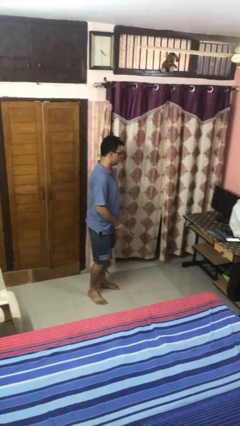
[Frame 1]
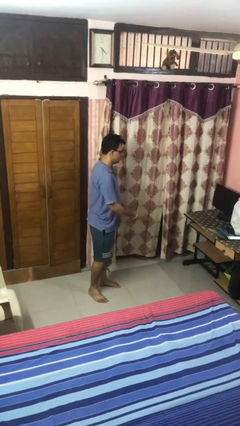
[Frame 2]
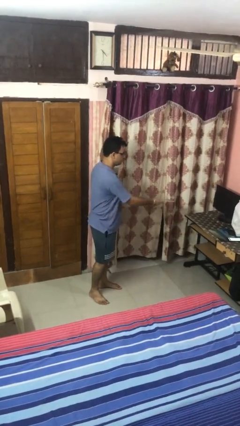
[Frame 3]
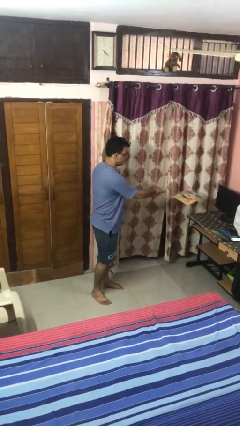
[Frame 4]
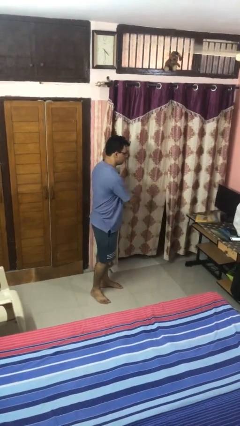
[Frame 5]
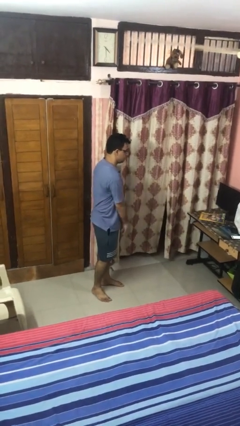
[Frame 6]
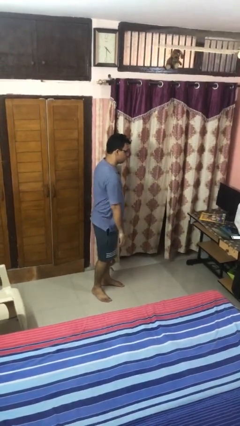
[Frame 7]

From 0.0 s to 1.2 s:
person throws object on table

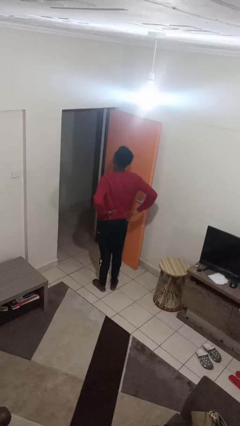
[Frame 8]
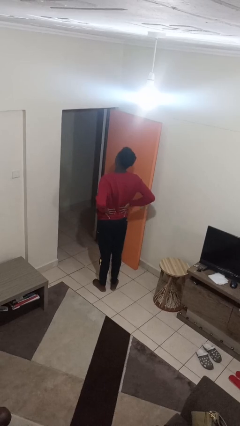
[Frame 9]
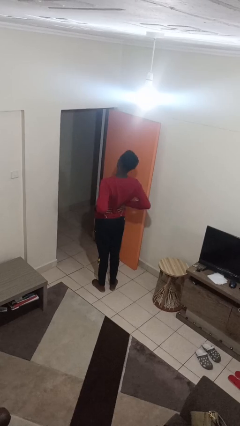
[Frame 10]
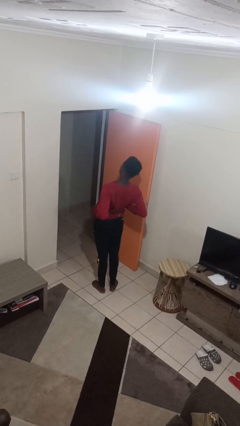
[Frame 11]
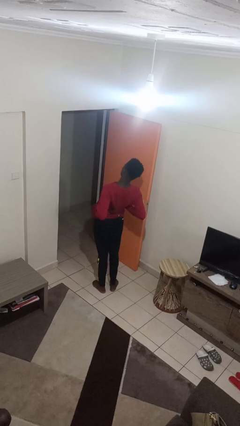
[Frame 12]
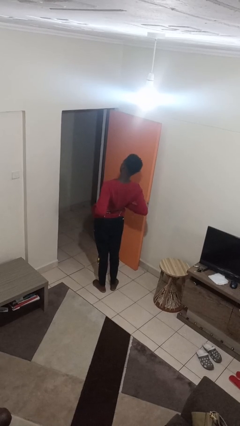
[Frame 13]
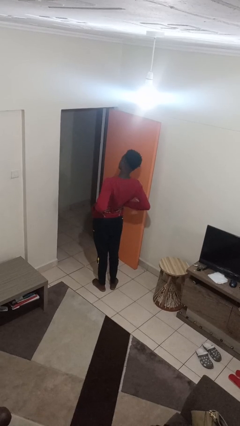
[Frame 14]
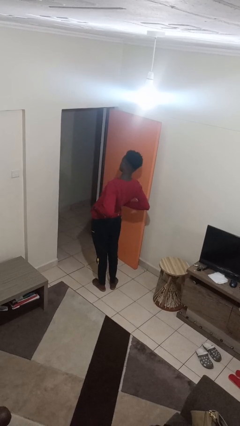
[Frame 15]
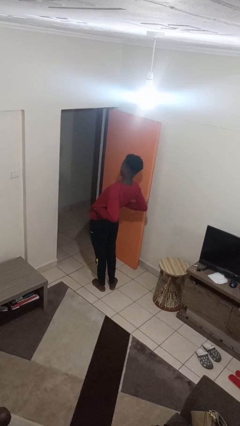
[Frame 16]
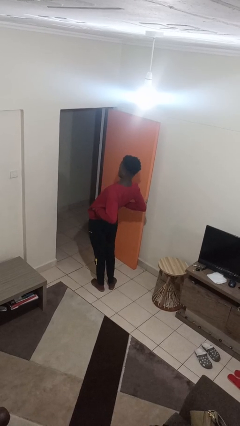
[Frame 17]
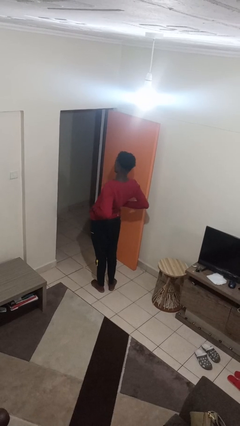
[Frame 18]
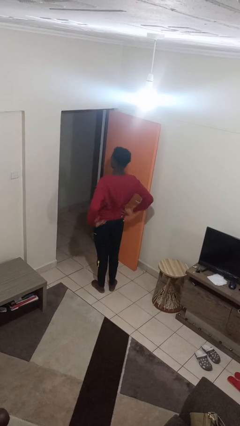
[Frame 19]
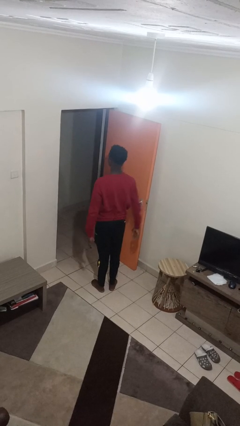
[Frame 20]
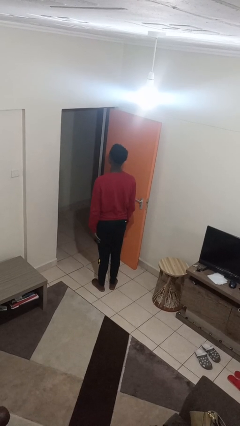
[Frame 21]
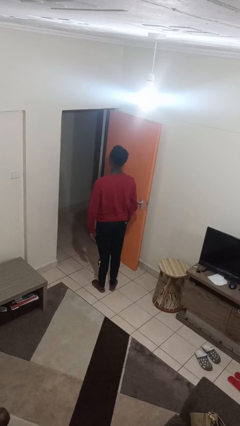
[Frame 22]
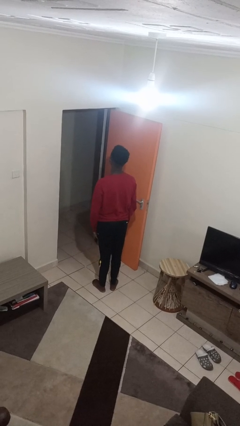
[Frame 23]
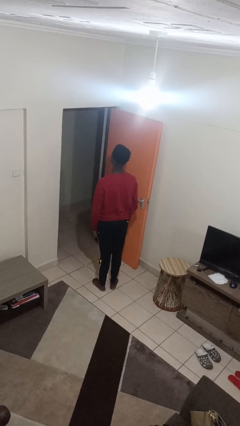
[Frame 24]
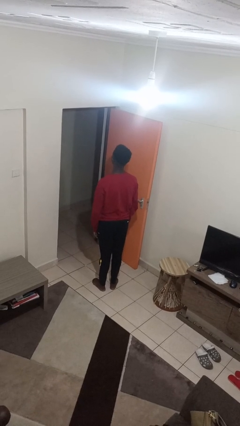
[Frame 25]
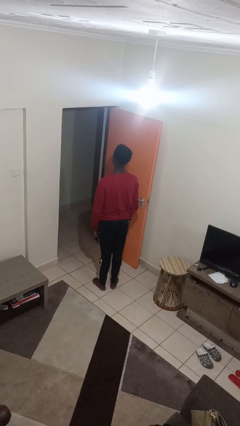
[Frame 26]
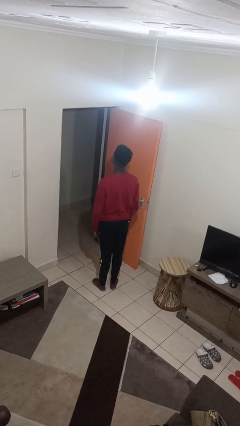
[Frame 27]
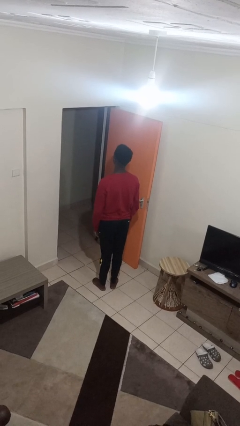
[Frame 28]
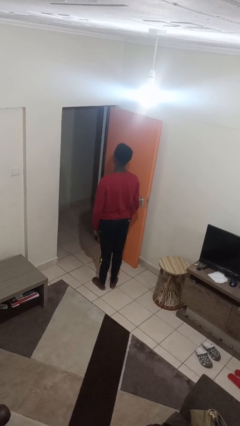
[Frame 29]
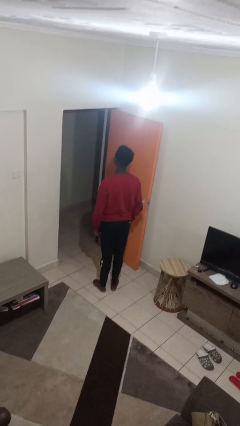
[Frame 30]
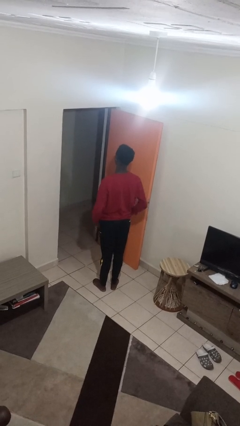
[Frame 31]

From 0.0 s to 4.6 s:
person stretches back

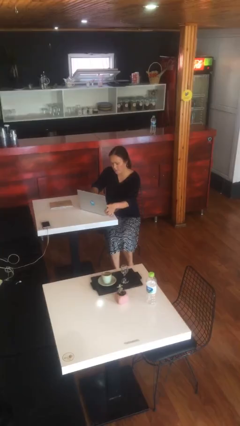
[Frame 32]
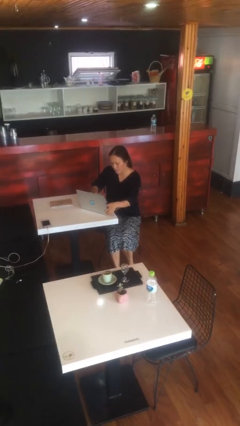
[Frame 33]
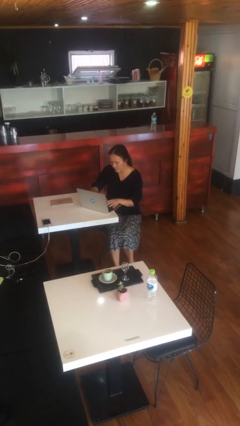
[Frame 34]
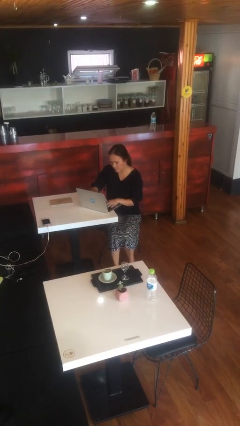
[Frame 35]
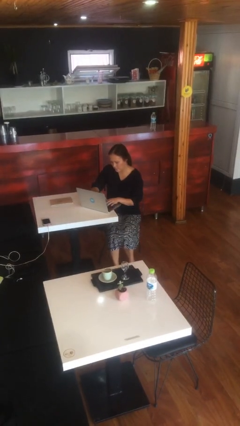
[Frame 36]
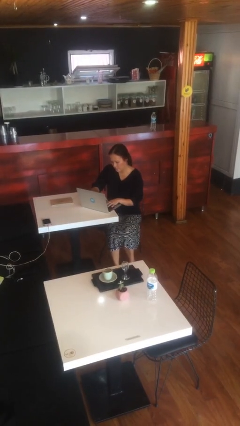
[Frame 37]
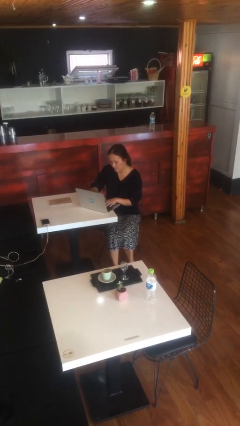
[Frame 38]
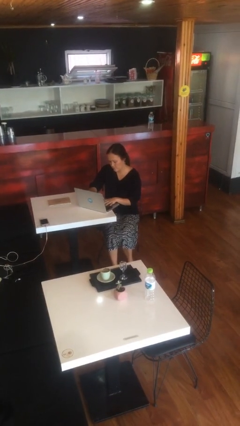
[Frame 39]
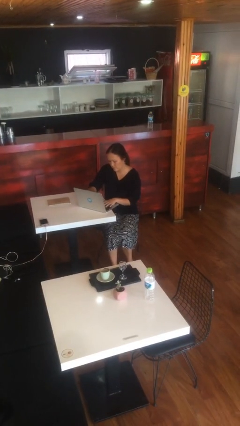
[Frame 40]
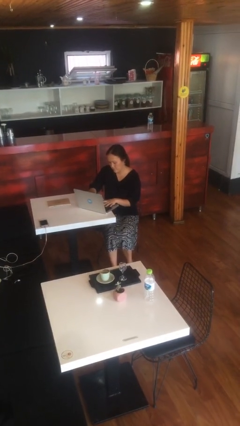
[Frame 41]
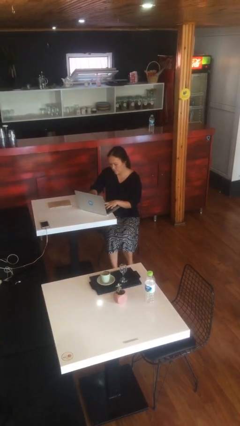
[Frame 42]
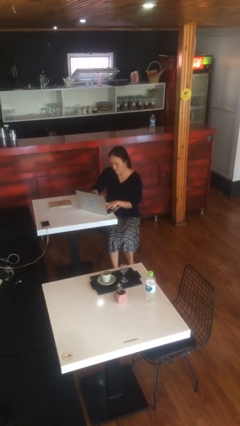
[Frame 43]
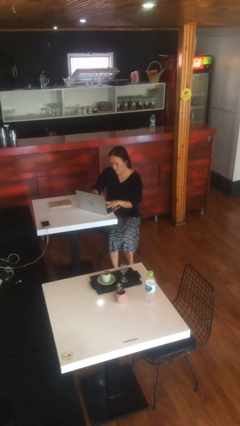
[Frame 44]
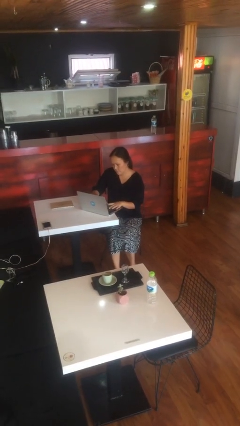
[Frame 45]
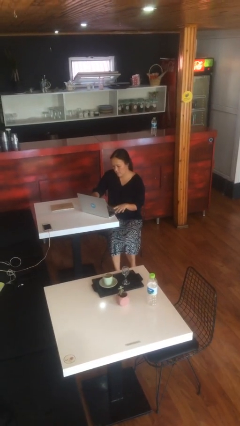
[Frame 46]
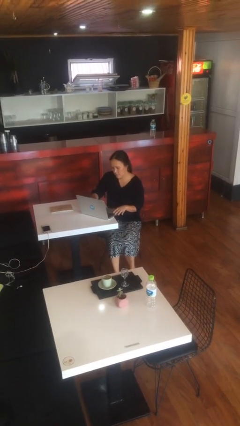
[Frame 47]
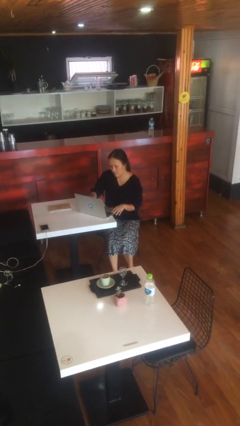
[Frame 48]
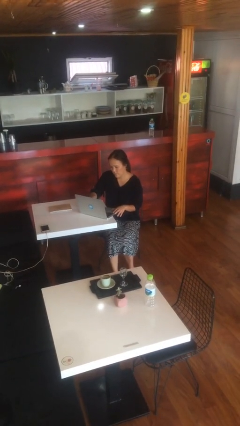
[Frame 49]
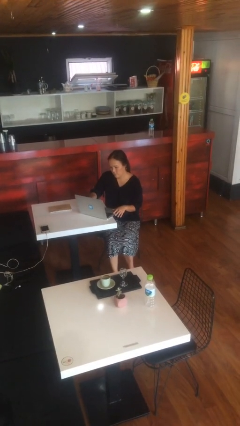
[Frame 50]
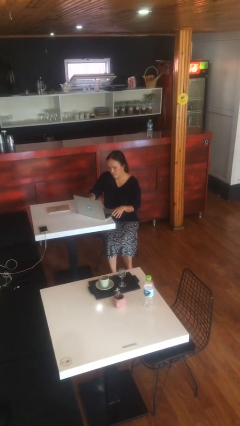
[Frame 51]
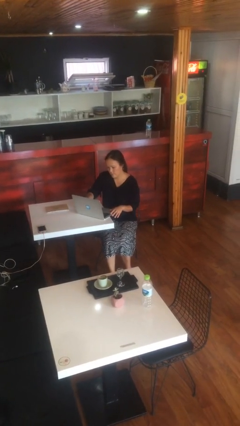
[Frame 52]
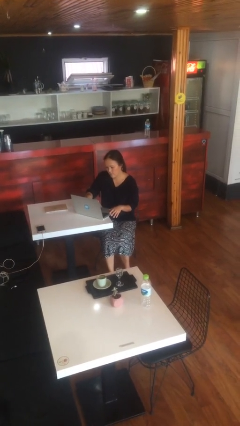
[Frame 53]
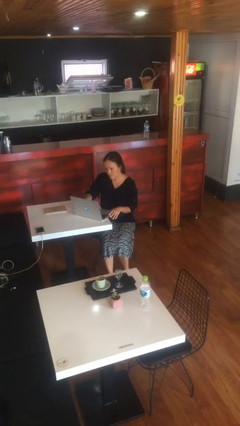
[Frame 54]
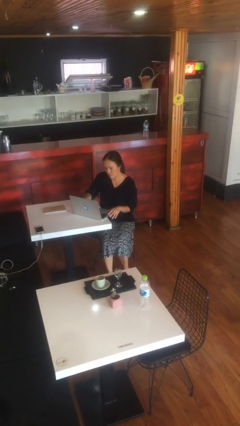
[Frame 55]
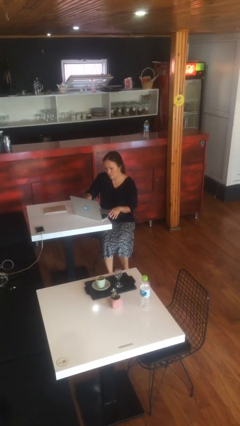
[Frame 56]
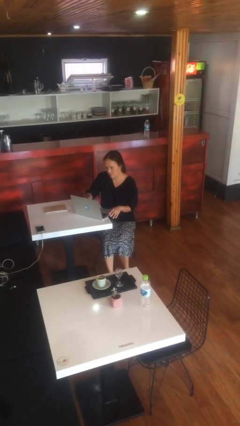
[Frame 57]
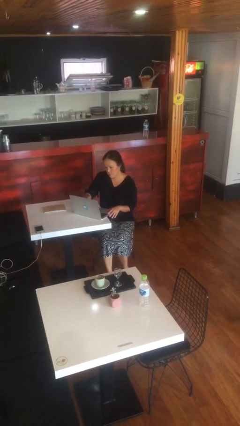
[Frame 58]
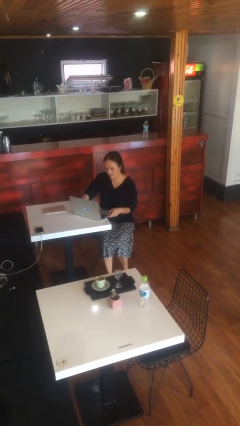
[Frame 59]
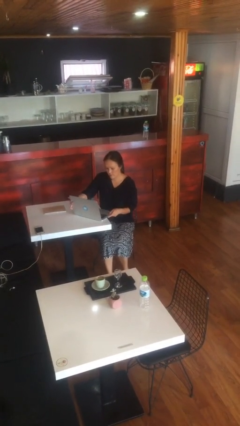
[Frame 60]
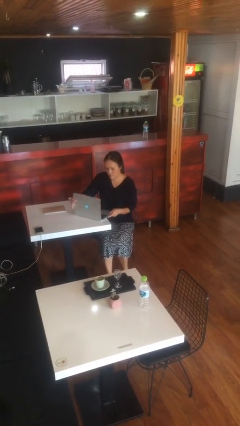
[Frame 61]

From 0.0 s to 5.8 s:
person interacts with laptop

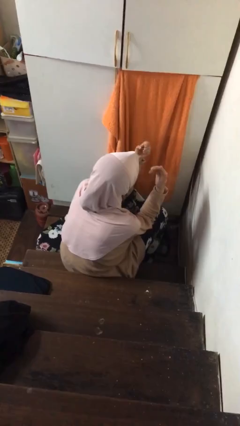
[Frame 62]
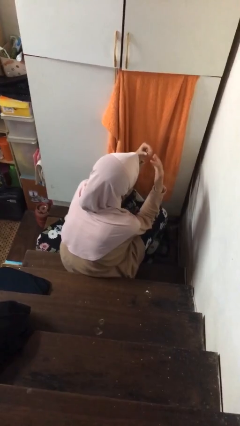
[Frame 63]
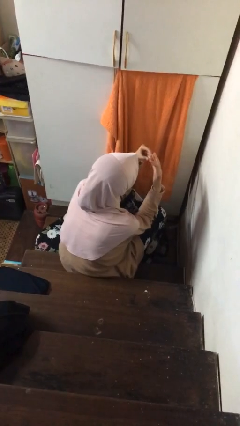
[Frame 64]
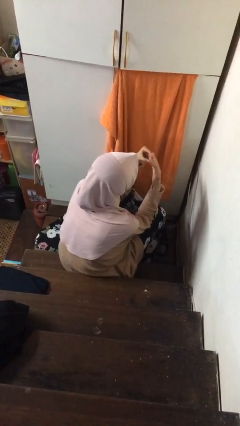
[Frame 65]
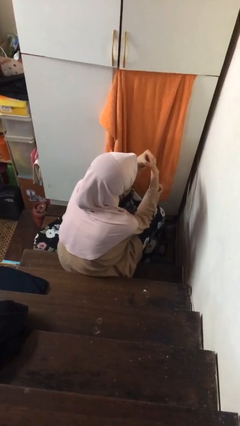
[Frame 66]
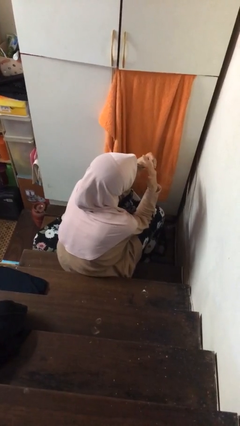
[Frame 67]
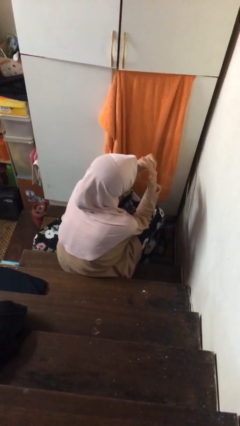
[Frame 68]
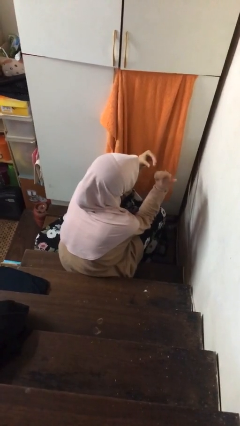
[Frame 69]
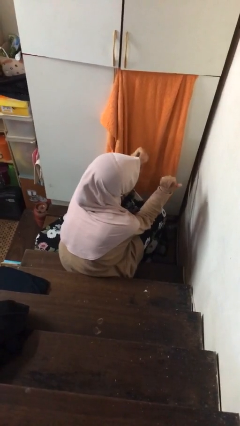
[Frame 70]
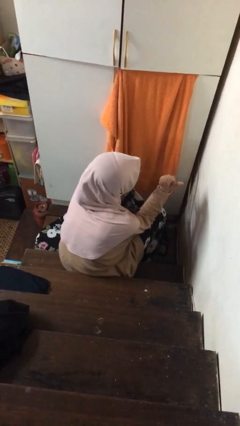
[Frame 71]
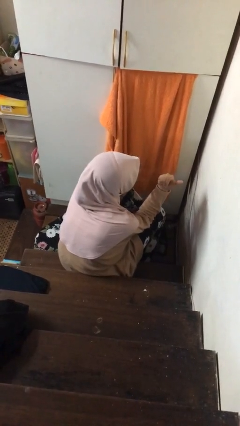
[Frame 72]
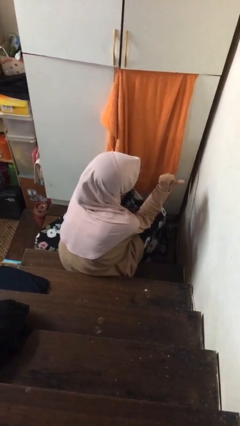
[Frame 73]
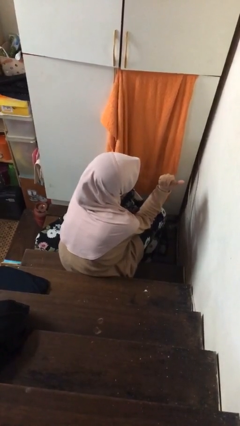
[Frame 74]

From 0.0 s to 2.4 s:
person puts on ring

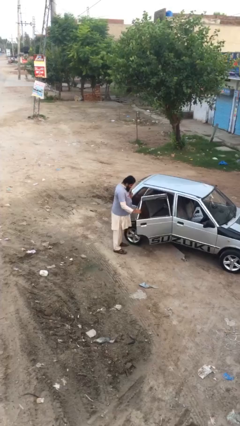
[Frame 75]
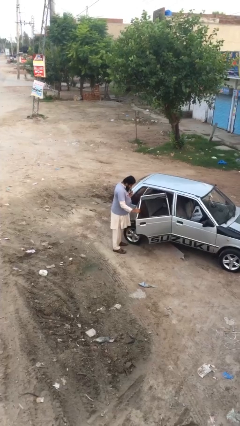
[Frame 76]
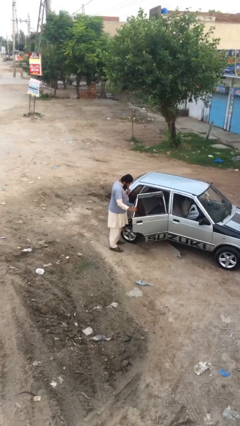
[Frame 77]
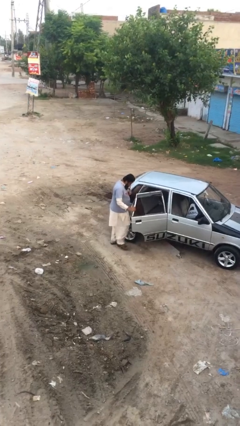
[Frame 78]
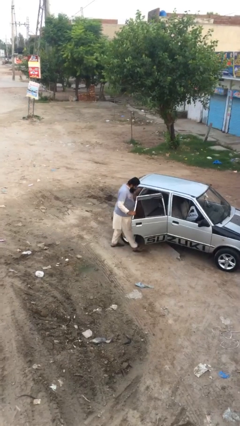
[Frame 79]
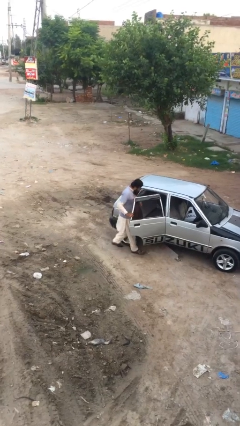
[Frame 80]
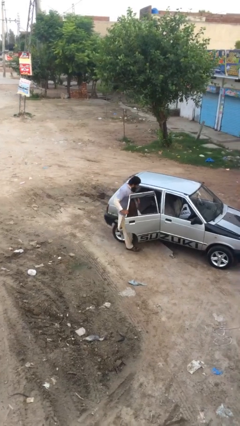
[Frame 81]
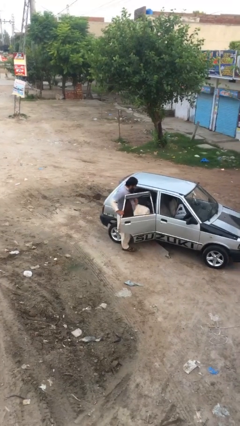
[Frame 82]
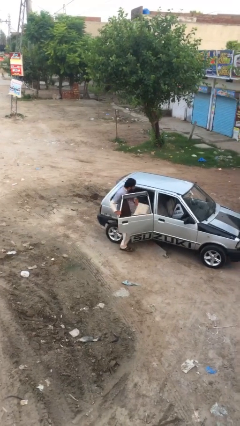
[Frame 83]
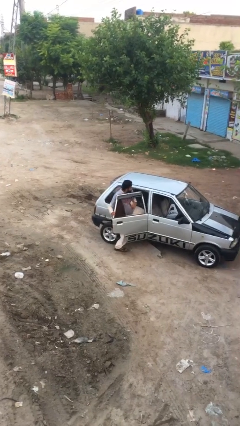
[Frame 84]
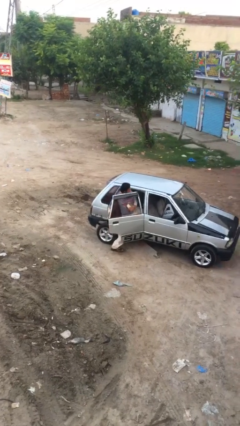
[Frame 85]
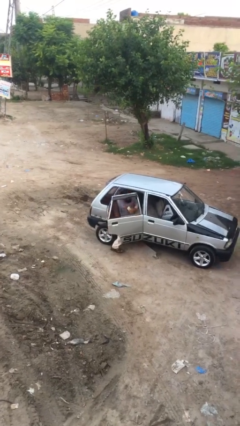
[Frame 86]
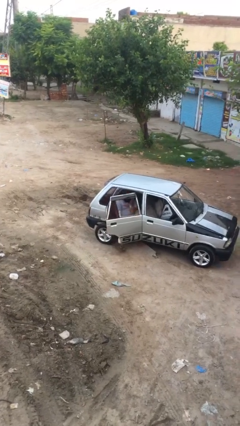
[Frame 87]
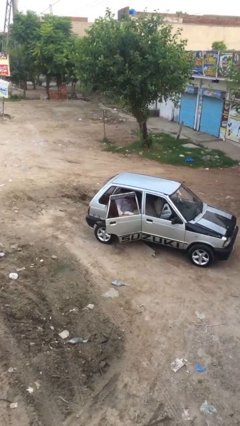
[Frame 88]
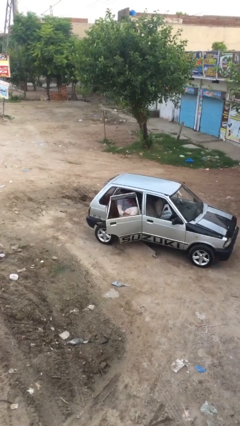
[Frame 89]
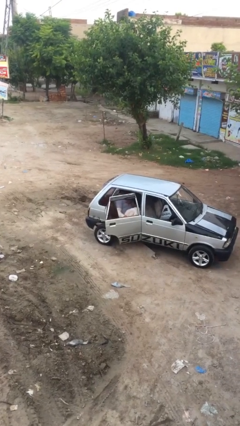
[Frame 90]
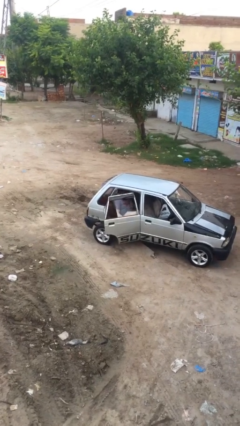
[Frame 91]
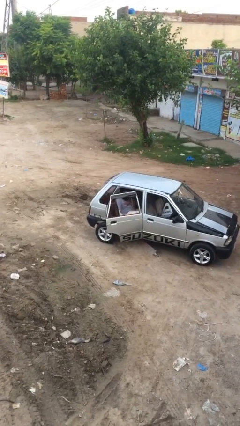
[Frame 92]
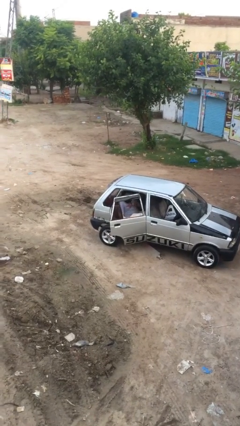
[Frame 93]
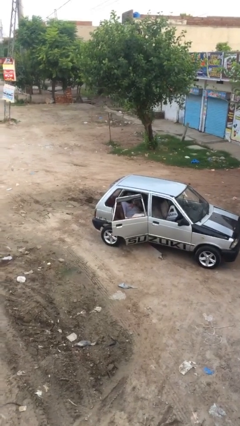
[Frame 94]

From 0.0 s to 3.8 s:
person enters car

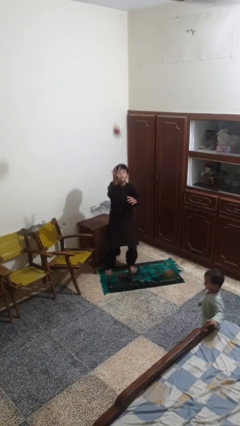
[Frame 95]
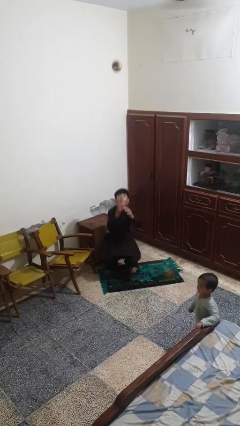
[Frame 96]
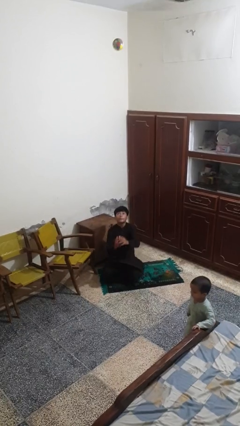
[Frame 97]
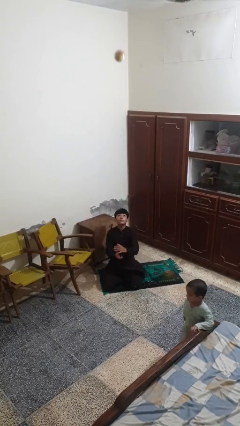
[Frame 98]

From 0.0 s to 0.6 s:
person drops object
